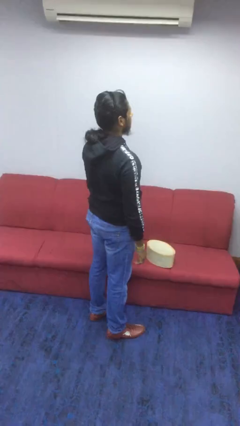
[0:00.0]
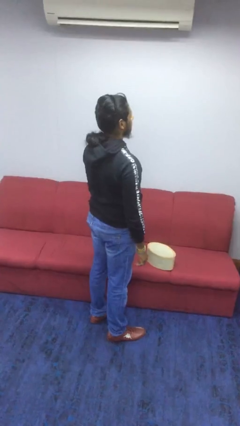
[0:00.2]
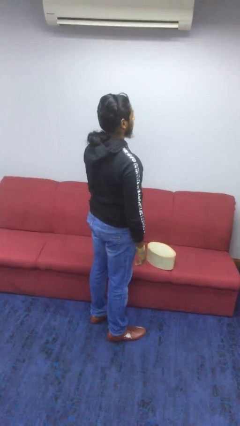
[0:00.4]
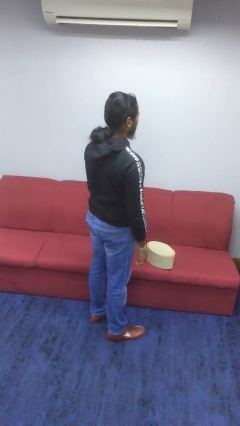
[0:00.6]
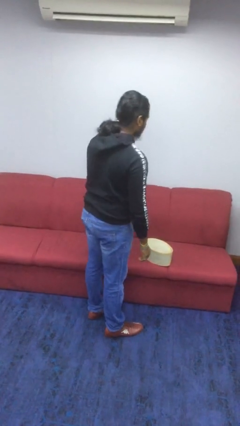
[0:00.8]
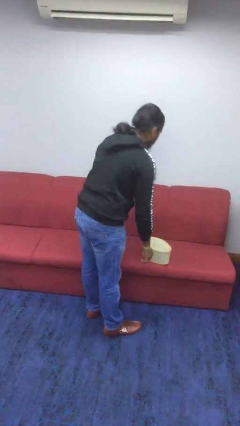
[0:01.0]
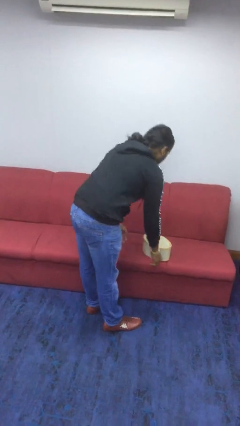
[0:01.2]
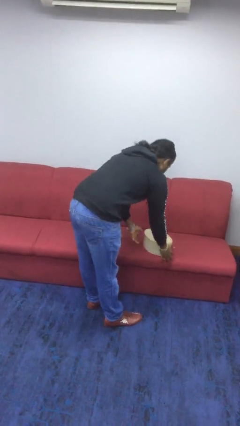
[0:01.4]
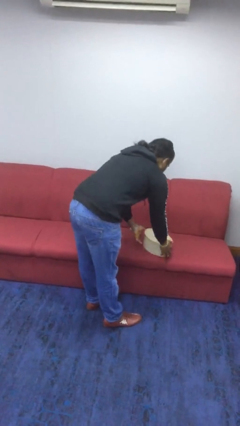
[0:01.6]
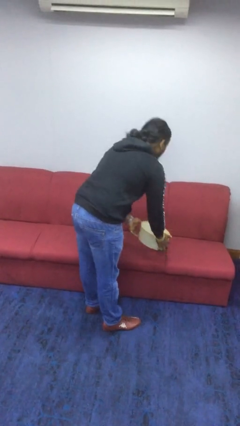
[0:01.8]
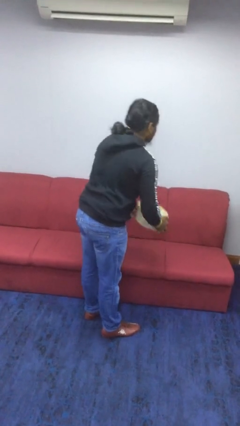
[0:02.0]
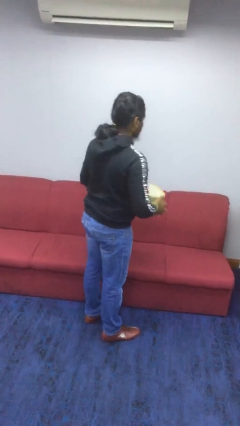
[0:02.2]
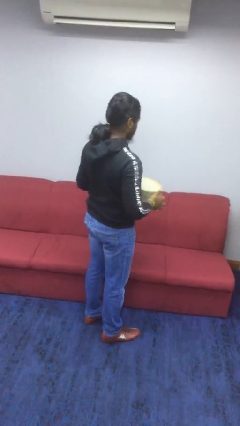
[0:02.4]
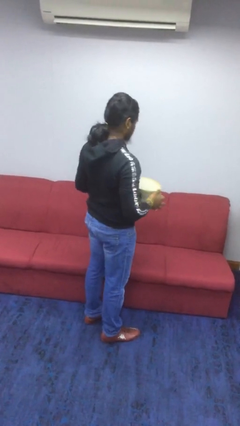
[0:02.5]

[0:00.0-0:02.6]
person picks up object from couch

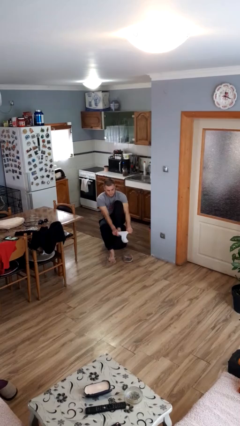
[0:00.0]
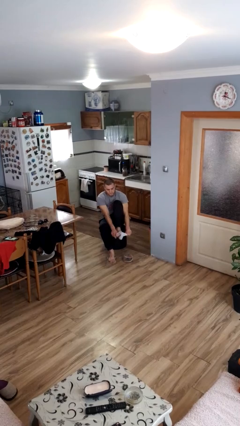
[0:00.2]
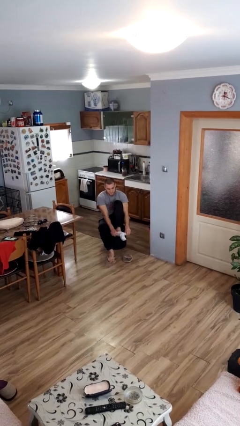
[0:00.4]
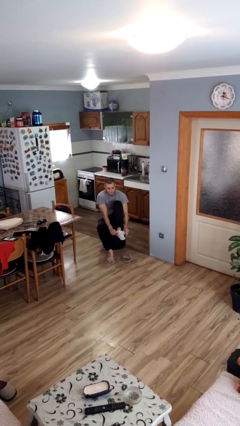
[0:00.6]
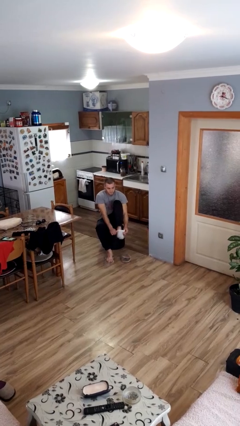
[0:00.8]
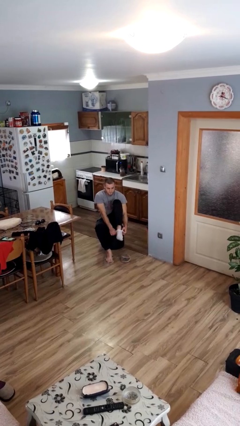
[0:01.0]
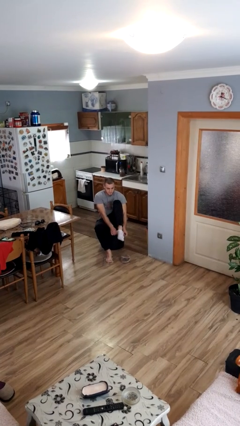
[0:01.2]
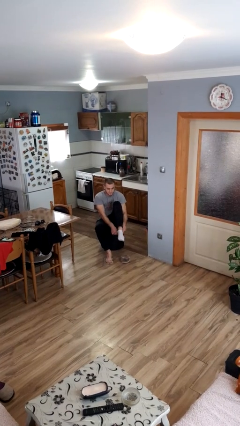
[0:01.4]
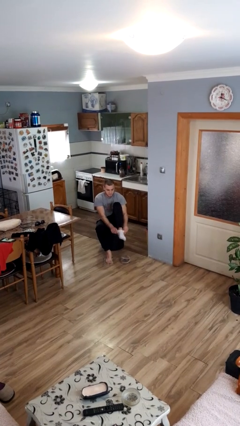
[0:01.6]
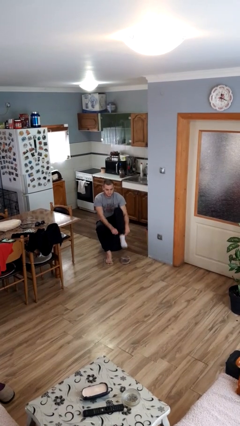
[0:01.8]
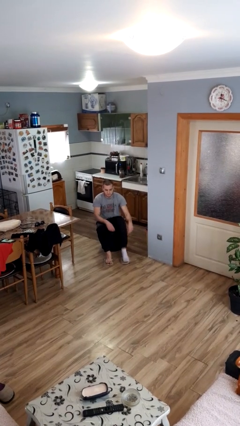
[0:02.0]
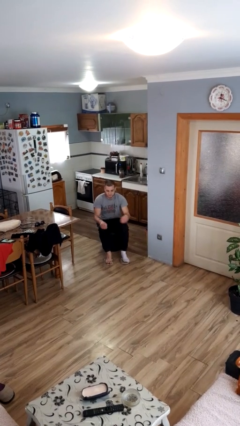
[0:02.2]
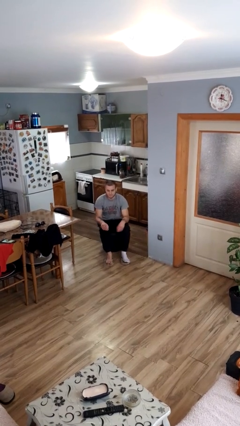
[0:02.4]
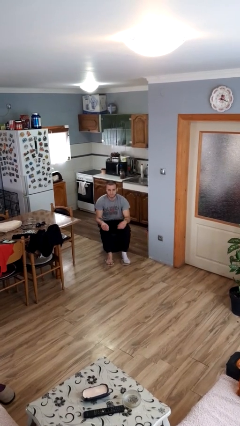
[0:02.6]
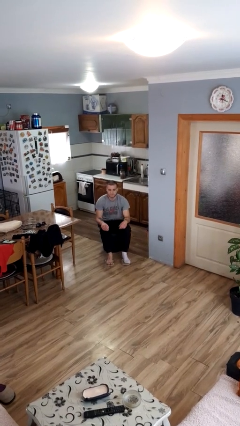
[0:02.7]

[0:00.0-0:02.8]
person puts on socks

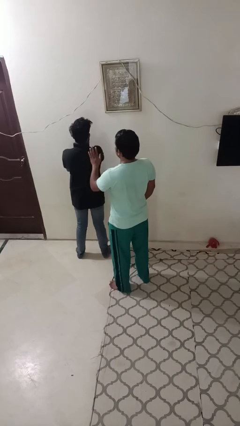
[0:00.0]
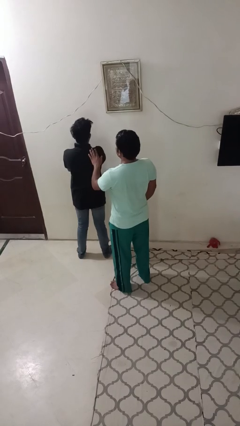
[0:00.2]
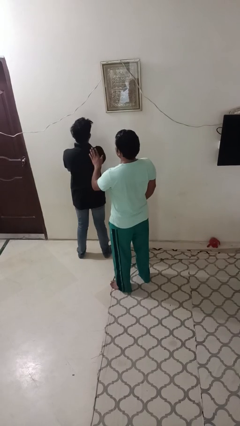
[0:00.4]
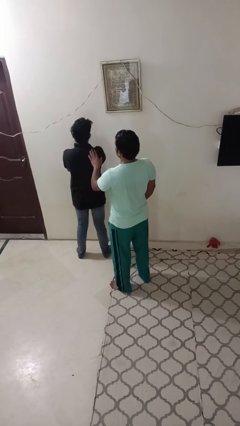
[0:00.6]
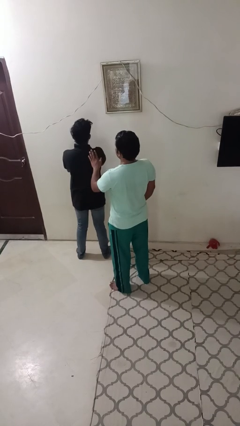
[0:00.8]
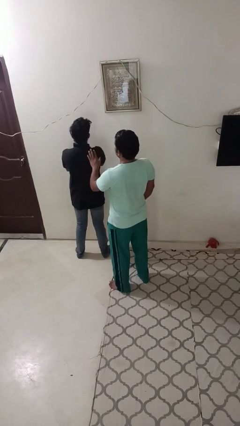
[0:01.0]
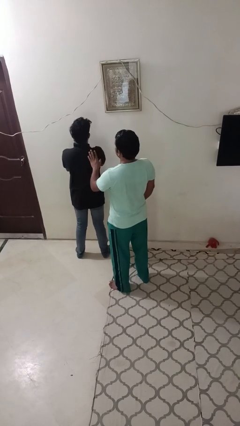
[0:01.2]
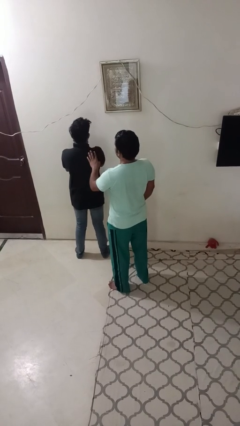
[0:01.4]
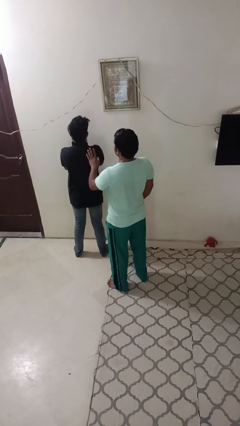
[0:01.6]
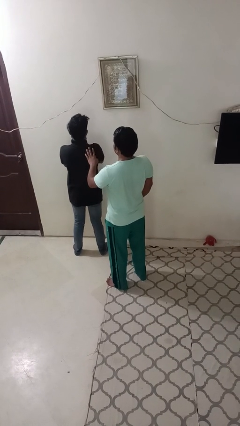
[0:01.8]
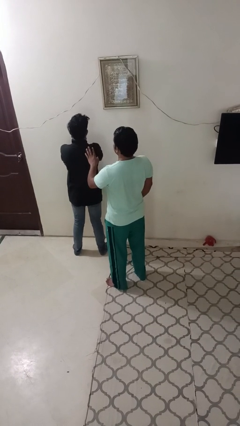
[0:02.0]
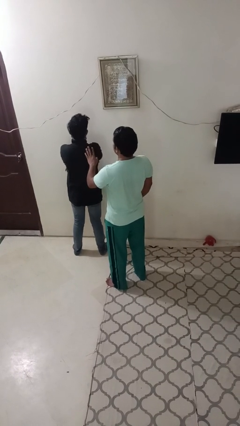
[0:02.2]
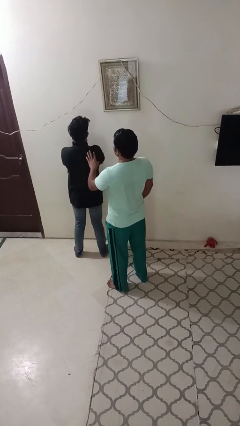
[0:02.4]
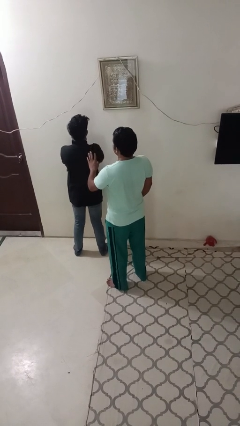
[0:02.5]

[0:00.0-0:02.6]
person touches back of person

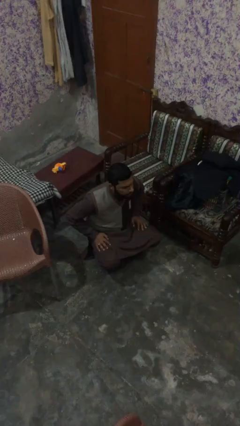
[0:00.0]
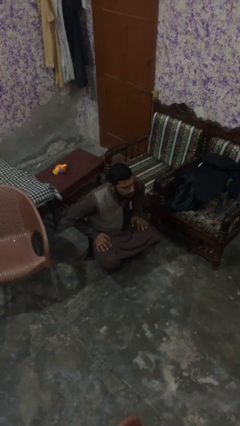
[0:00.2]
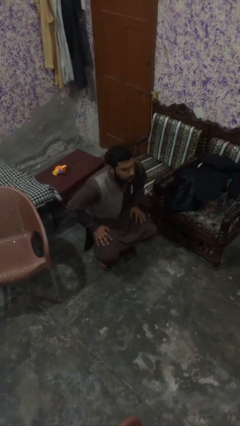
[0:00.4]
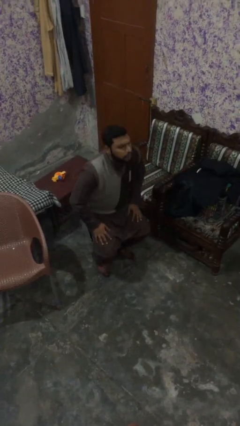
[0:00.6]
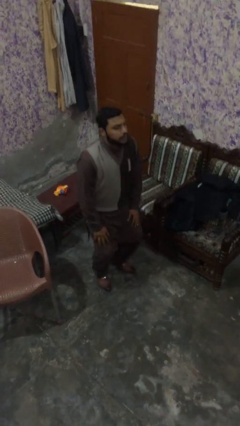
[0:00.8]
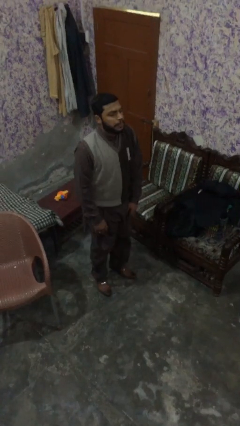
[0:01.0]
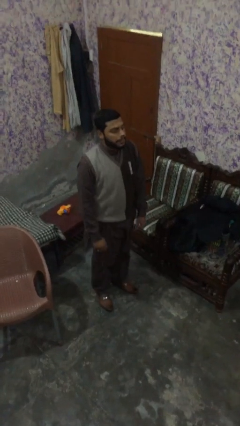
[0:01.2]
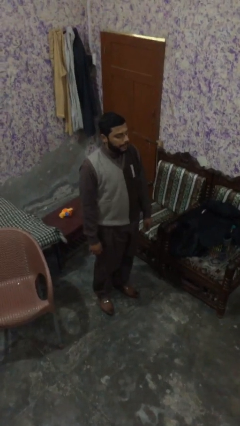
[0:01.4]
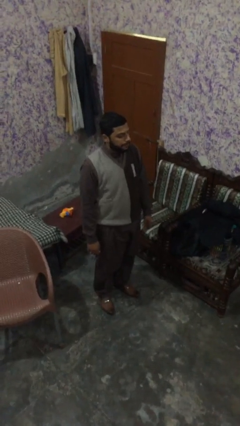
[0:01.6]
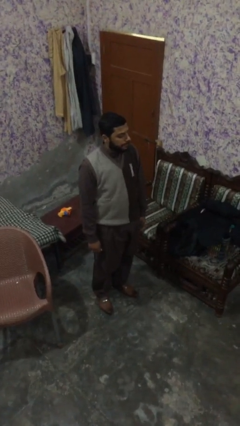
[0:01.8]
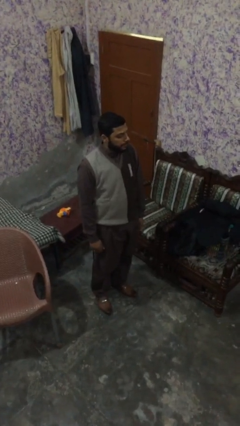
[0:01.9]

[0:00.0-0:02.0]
person stands up

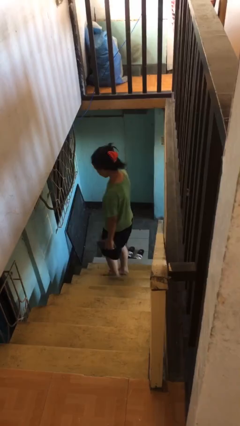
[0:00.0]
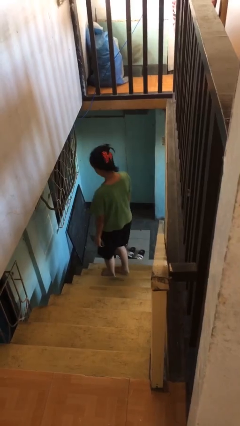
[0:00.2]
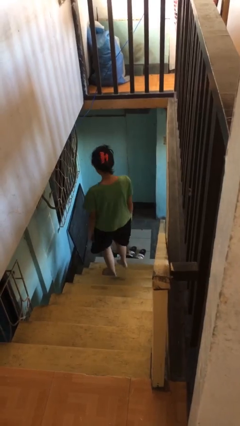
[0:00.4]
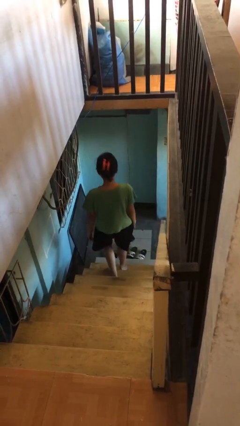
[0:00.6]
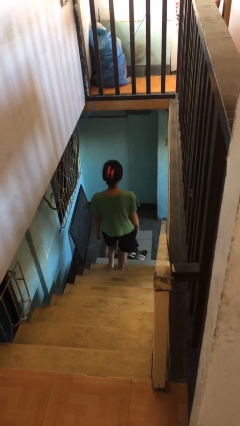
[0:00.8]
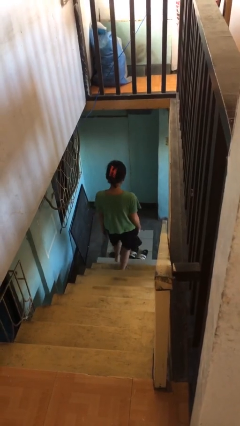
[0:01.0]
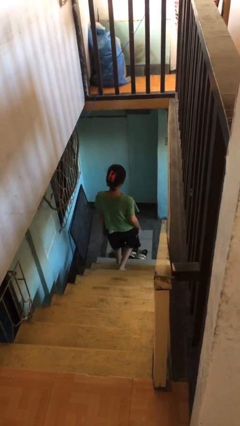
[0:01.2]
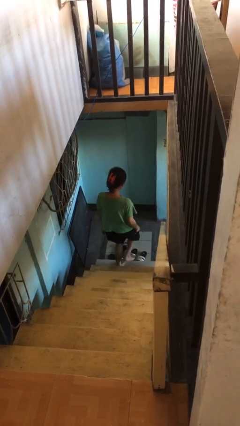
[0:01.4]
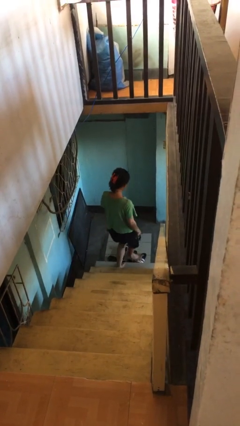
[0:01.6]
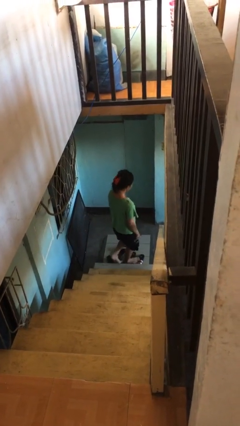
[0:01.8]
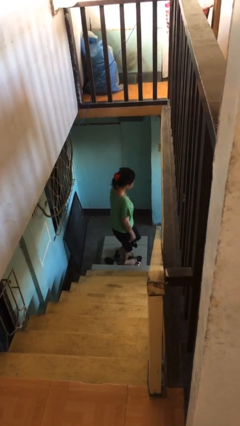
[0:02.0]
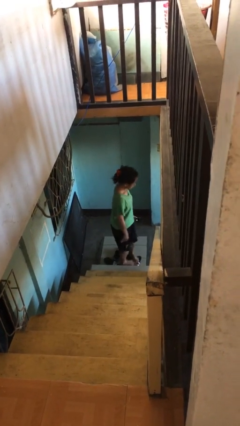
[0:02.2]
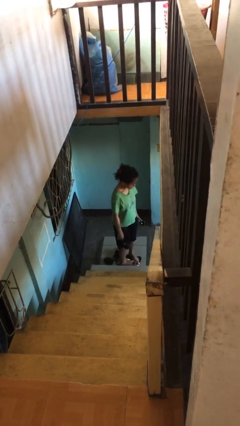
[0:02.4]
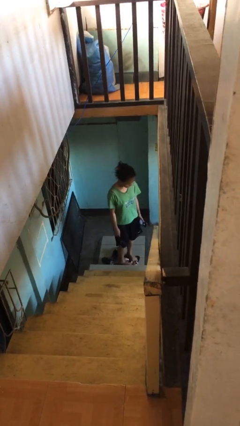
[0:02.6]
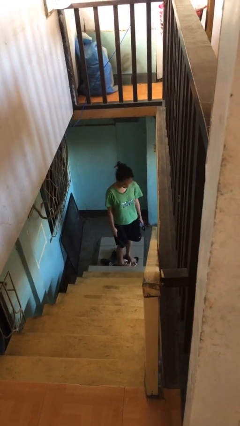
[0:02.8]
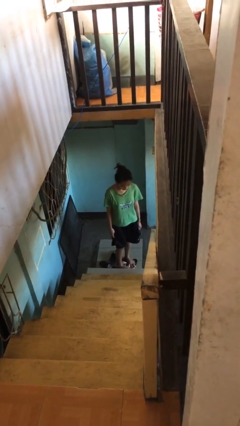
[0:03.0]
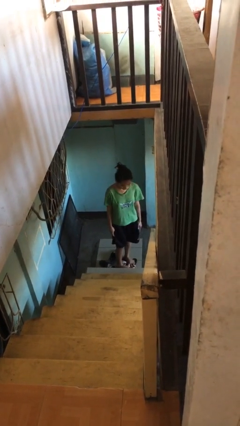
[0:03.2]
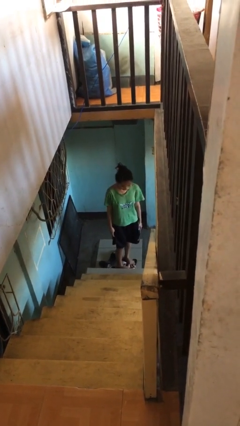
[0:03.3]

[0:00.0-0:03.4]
person climbs down stairs

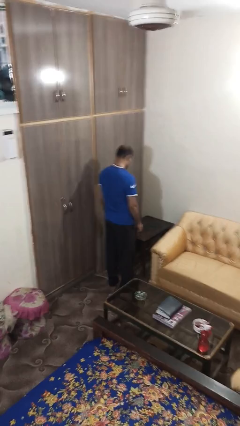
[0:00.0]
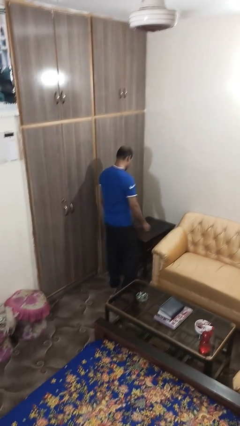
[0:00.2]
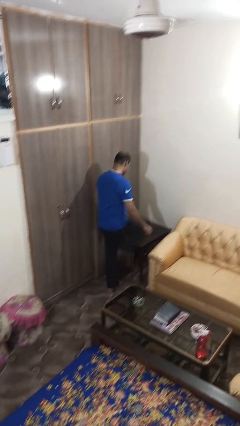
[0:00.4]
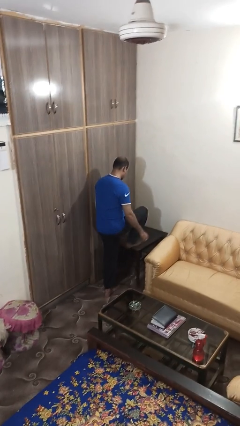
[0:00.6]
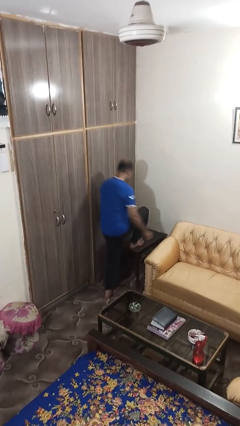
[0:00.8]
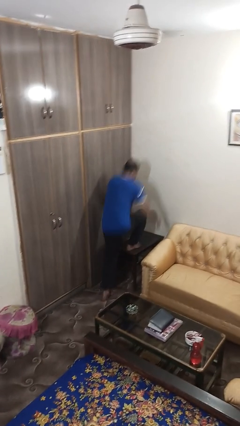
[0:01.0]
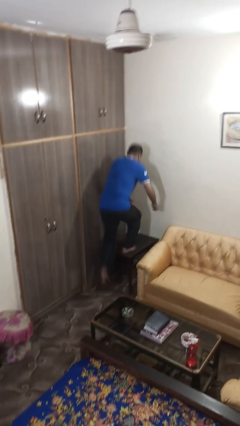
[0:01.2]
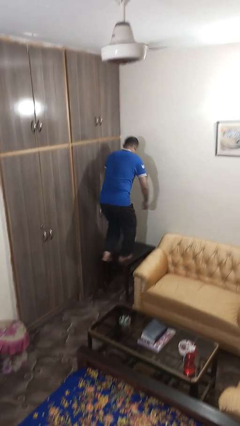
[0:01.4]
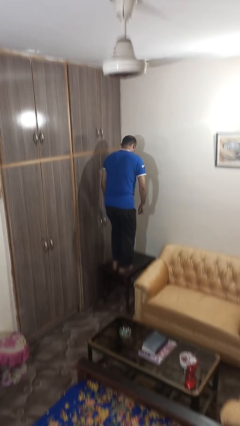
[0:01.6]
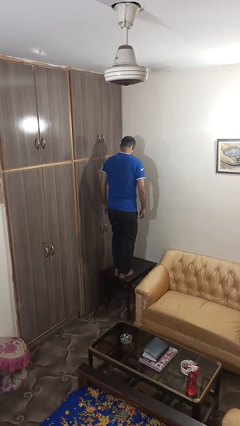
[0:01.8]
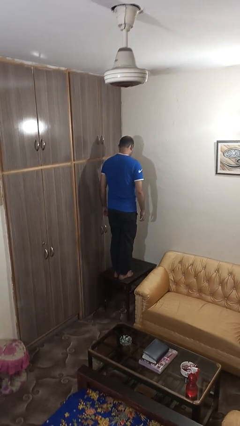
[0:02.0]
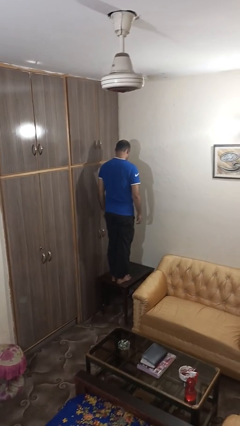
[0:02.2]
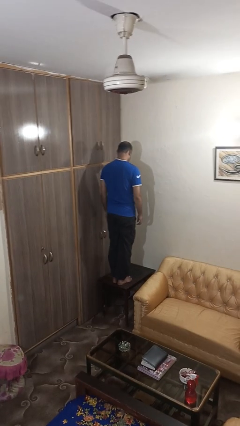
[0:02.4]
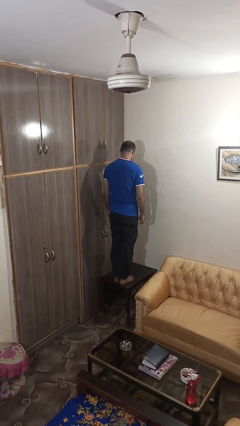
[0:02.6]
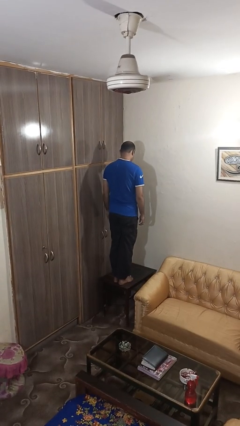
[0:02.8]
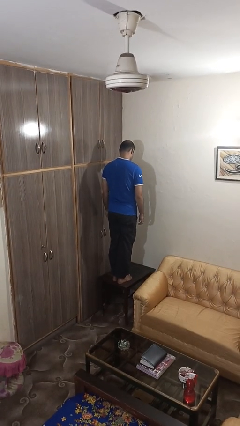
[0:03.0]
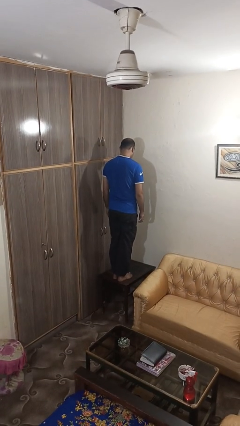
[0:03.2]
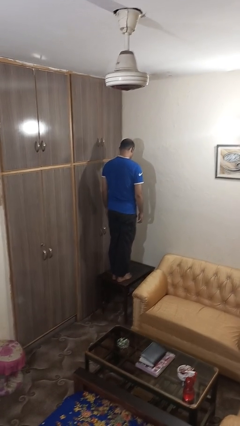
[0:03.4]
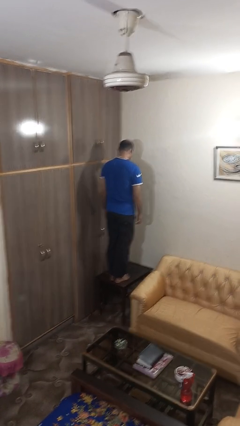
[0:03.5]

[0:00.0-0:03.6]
person climbs on table

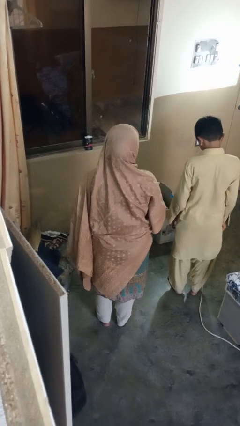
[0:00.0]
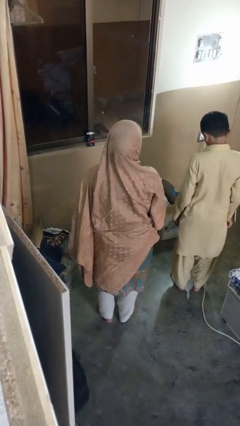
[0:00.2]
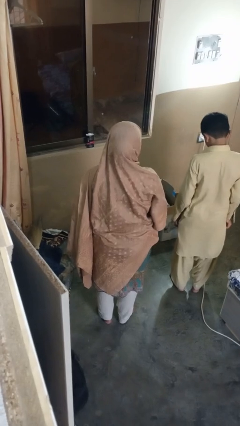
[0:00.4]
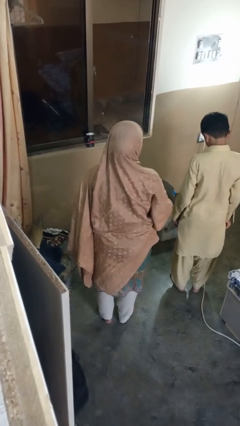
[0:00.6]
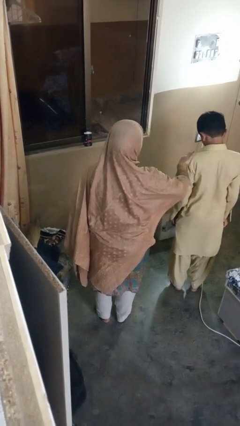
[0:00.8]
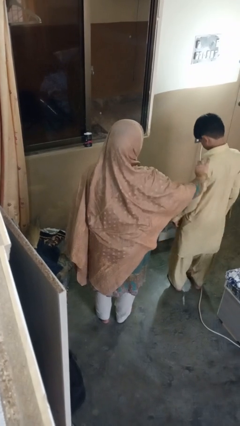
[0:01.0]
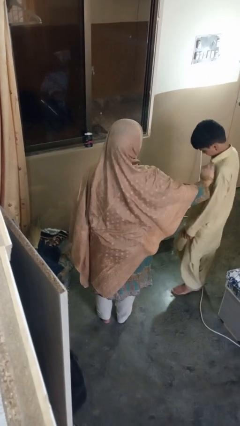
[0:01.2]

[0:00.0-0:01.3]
person grabs person by shoulder
